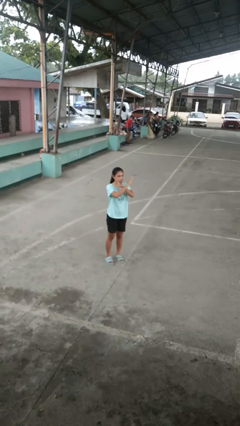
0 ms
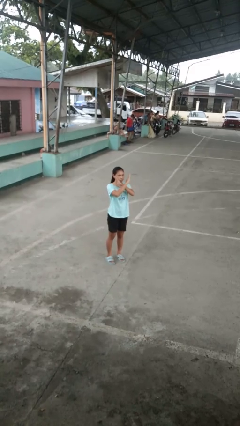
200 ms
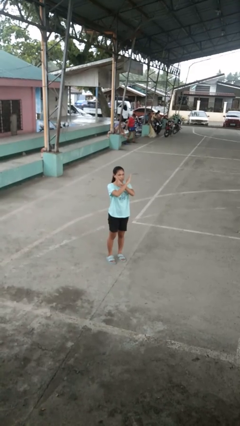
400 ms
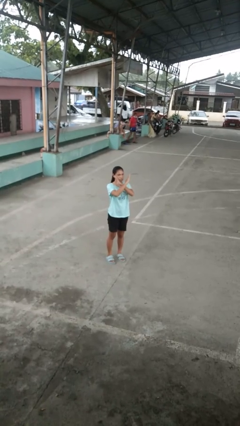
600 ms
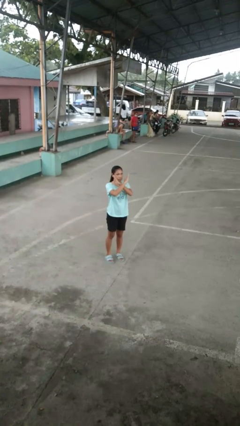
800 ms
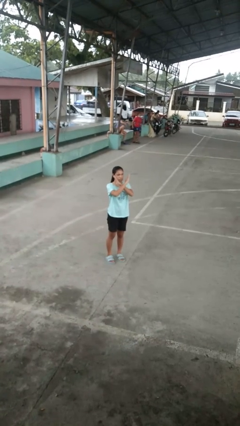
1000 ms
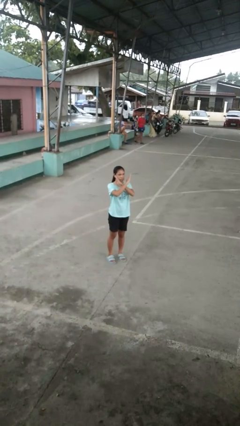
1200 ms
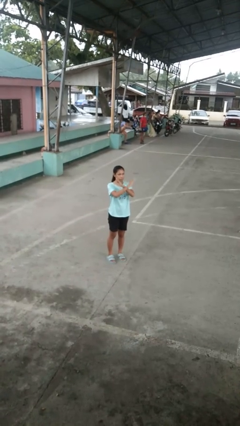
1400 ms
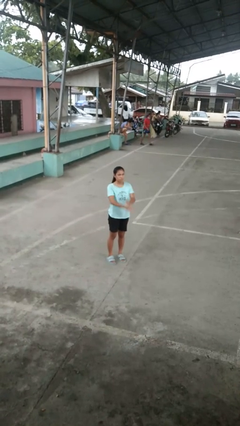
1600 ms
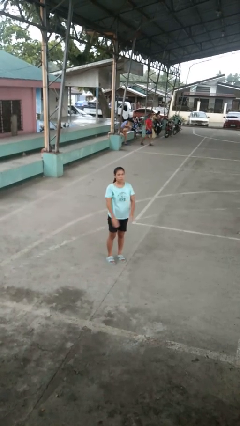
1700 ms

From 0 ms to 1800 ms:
person gestures arms x

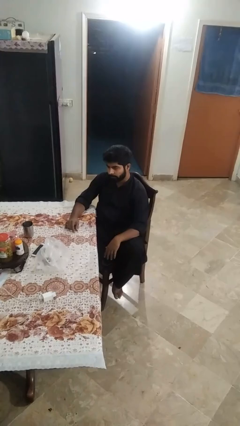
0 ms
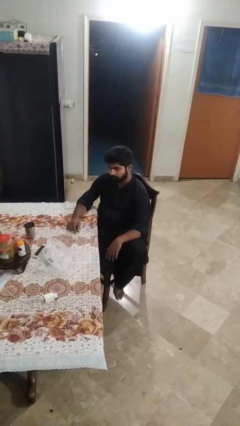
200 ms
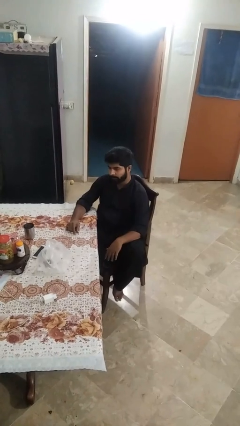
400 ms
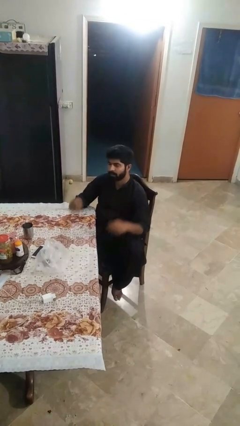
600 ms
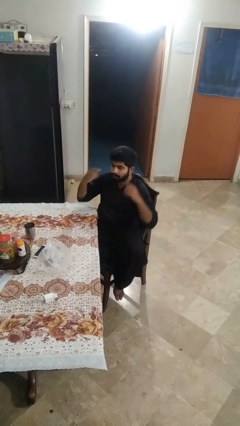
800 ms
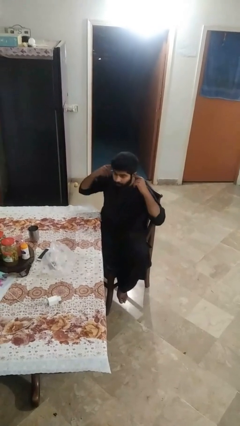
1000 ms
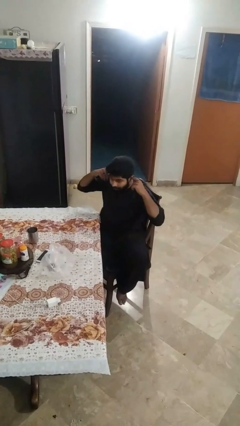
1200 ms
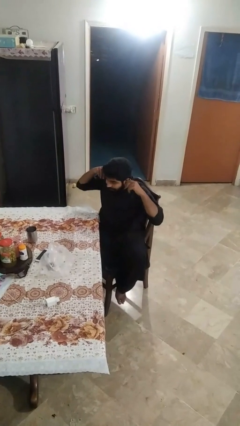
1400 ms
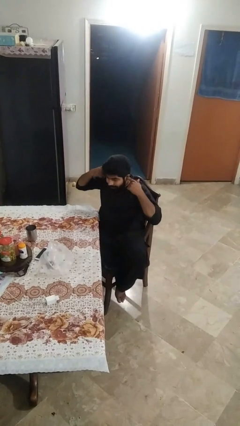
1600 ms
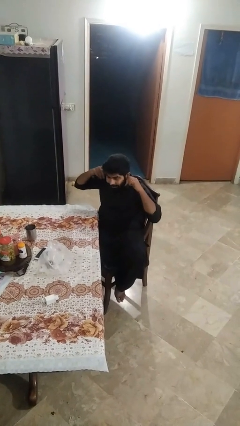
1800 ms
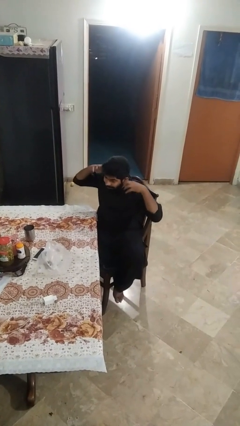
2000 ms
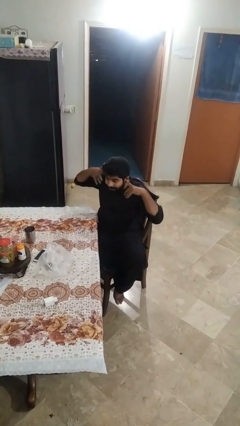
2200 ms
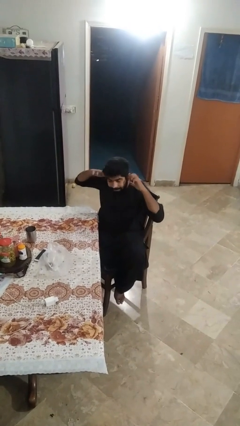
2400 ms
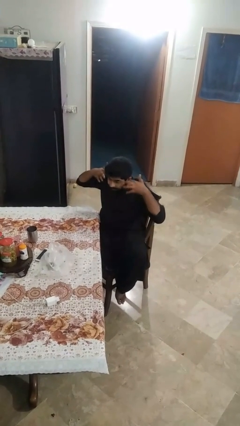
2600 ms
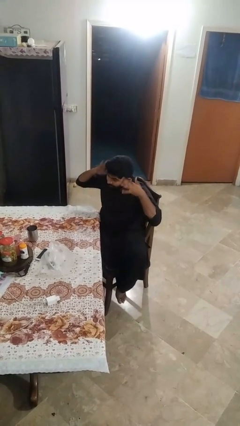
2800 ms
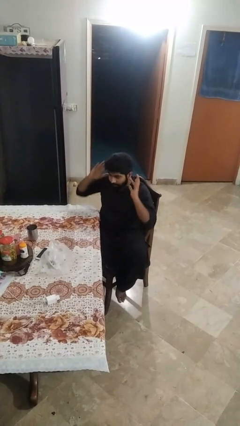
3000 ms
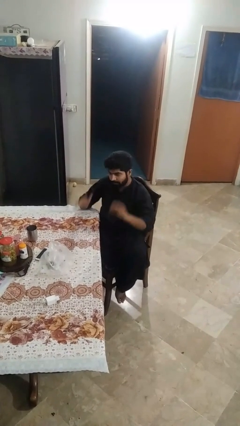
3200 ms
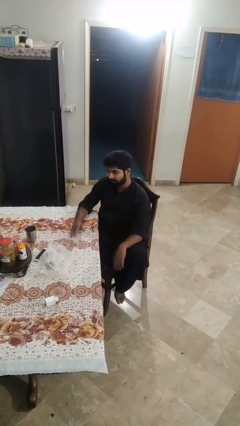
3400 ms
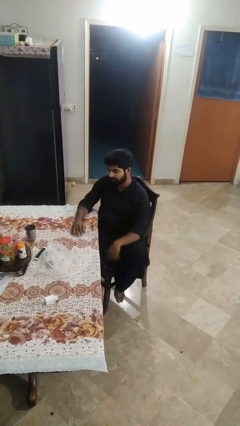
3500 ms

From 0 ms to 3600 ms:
person puts fingers in ear

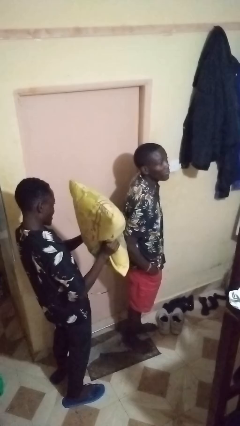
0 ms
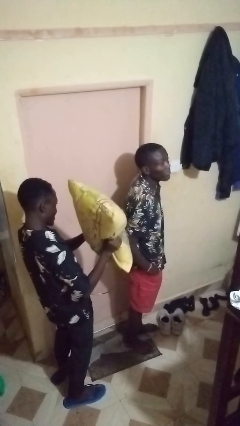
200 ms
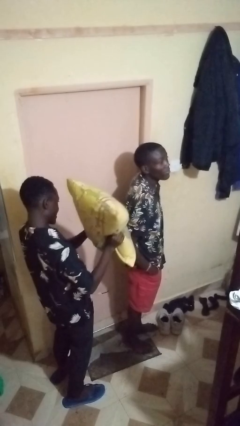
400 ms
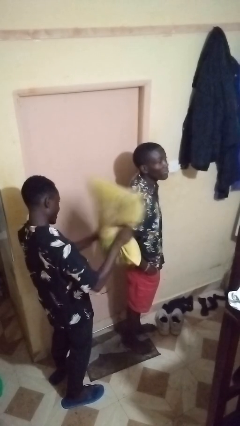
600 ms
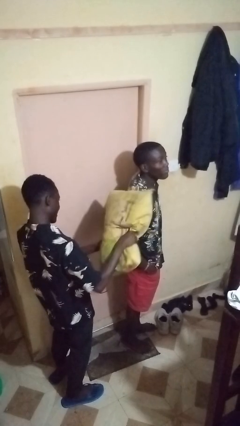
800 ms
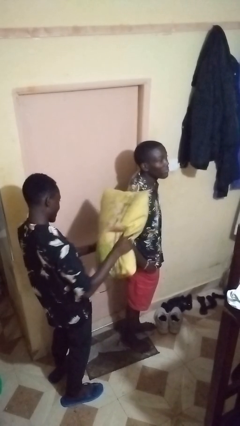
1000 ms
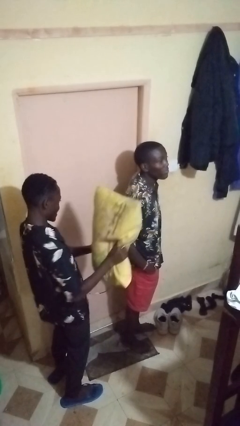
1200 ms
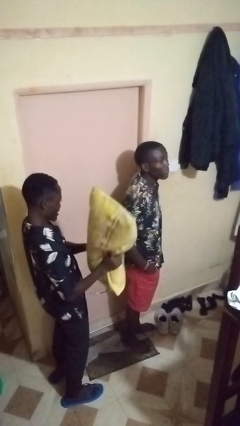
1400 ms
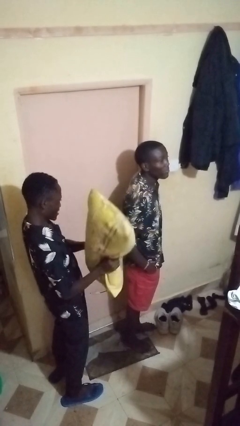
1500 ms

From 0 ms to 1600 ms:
person hits person with pillow

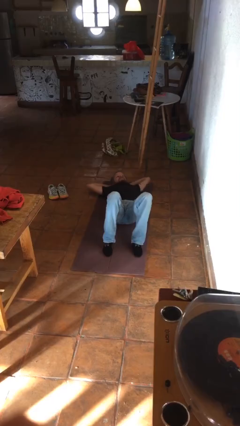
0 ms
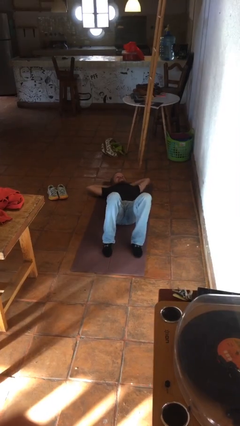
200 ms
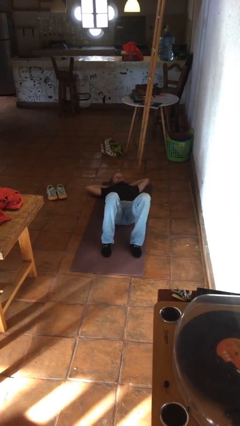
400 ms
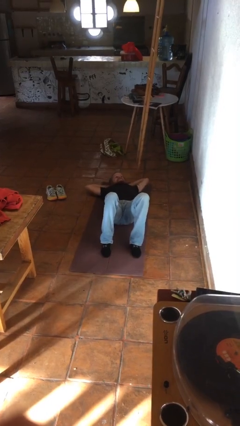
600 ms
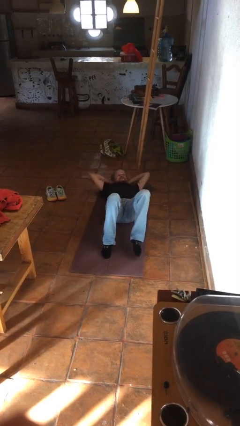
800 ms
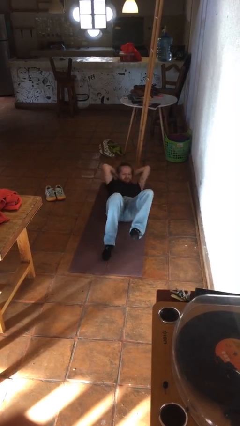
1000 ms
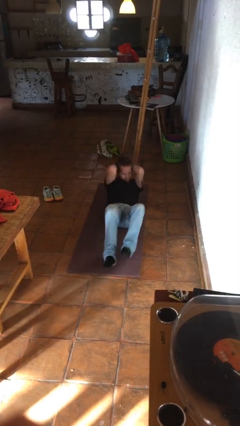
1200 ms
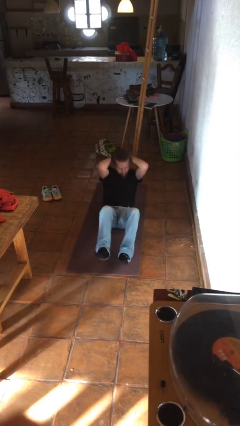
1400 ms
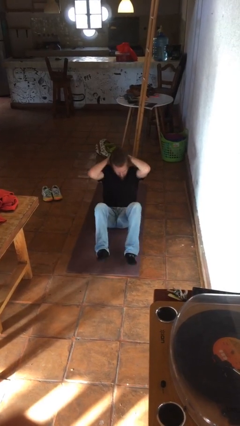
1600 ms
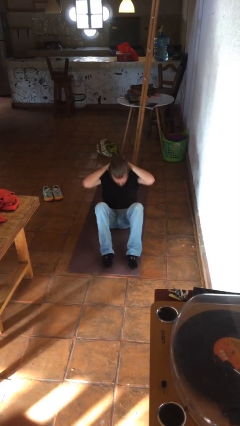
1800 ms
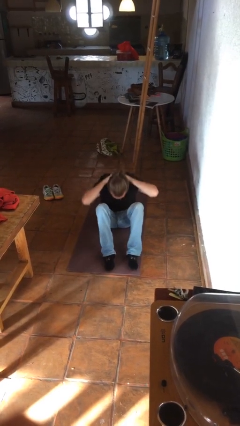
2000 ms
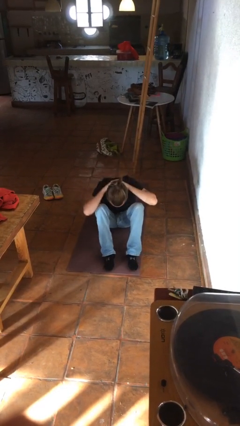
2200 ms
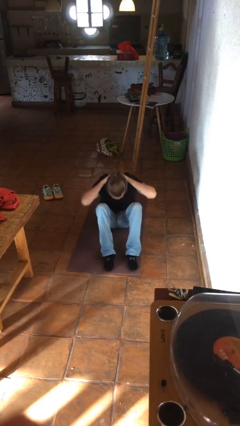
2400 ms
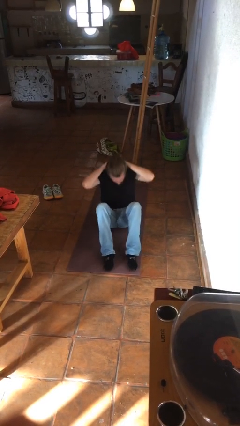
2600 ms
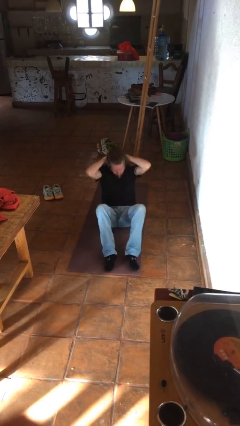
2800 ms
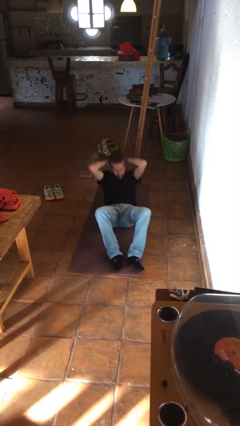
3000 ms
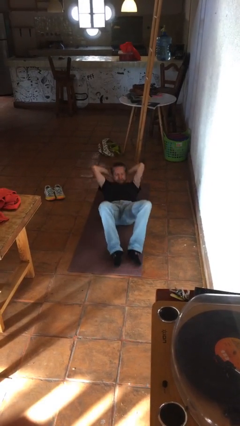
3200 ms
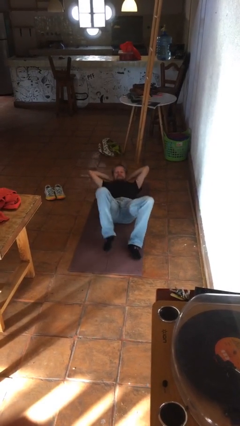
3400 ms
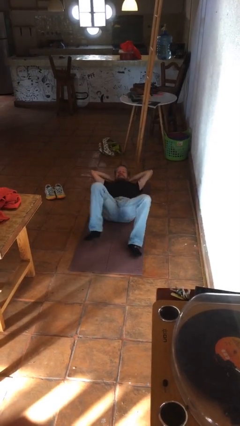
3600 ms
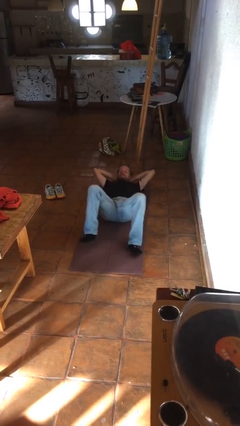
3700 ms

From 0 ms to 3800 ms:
person exercises with situp

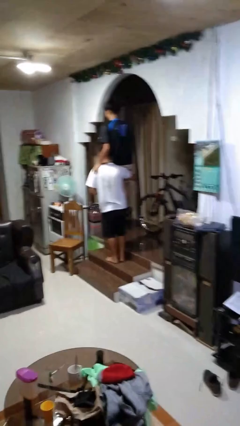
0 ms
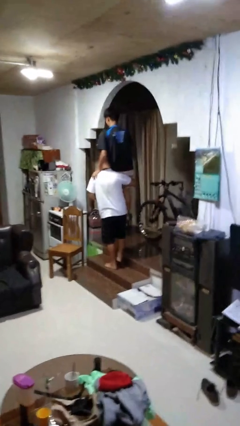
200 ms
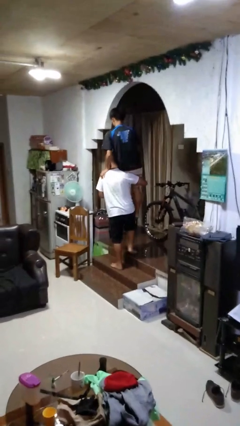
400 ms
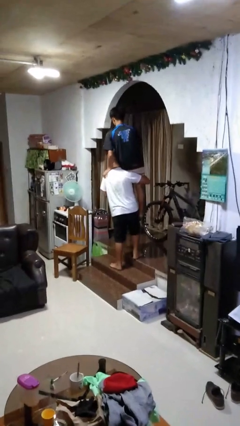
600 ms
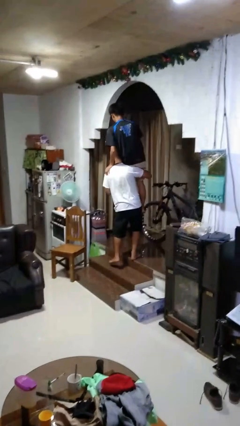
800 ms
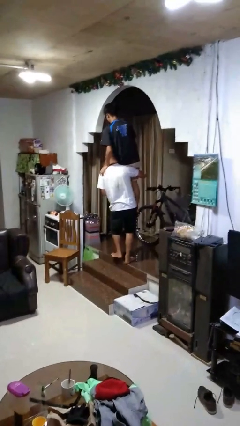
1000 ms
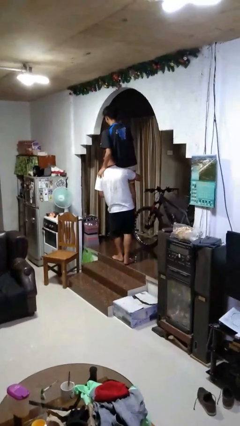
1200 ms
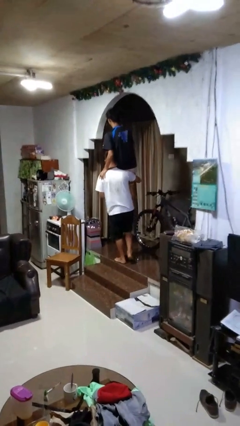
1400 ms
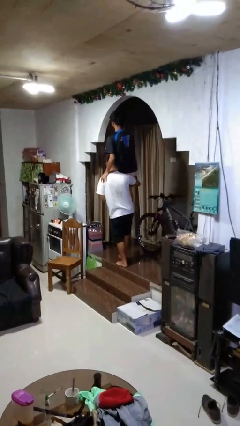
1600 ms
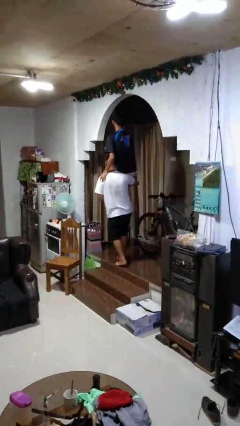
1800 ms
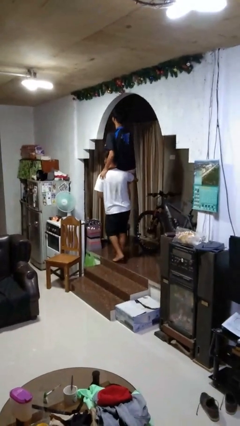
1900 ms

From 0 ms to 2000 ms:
person carries person on shoulders

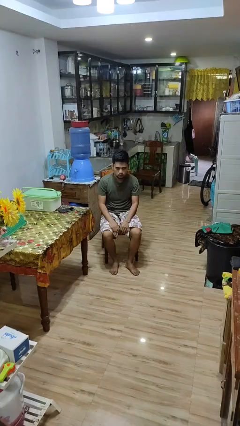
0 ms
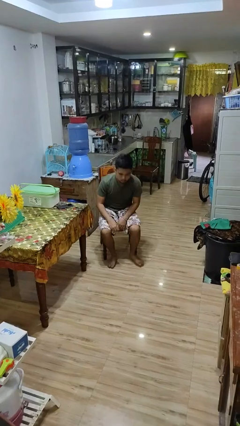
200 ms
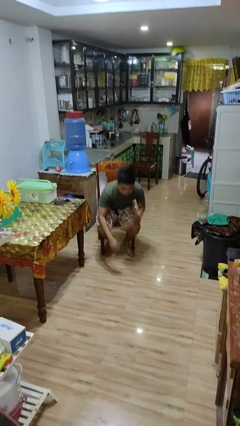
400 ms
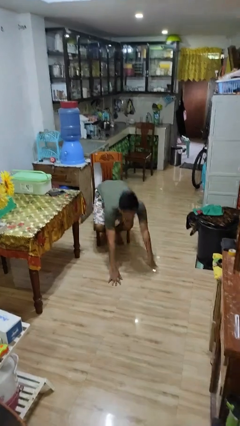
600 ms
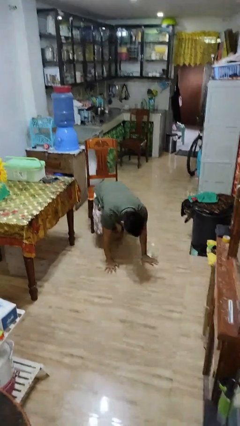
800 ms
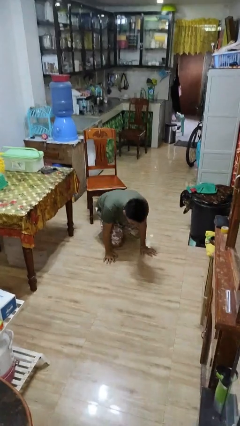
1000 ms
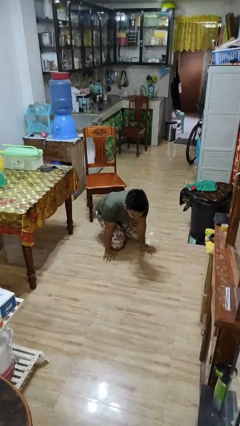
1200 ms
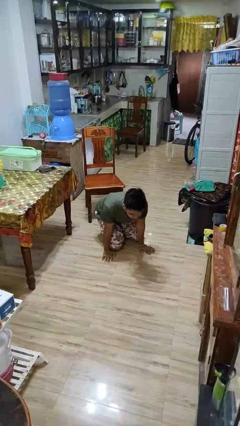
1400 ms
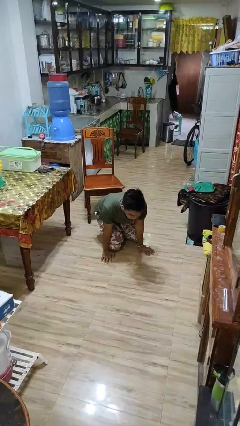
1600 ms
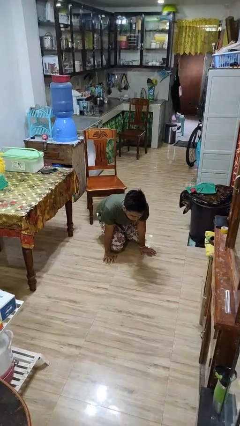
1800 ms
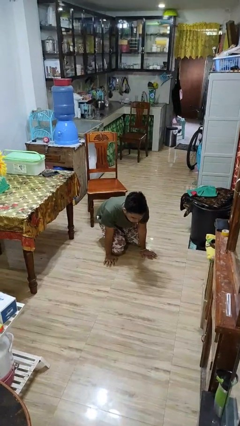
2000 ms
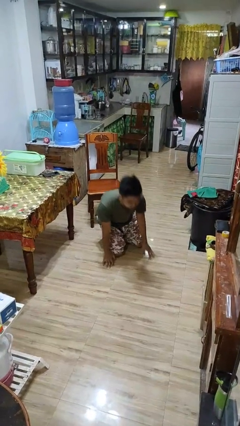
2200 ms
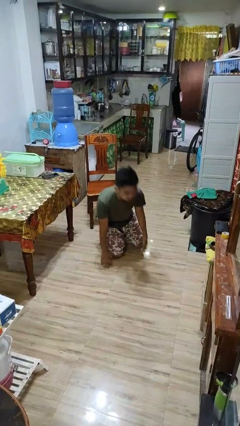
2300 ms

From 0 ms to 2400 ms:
person falls from chair

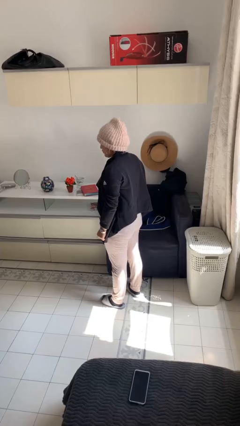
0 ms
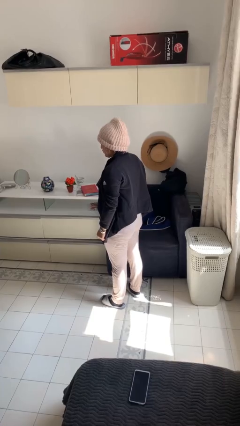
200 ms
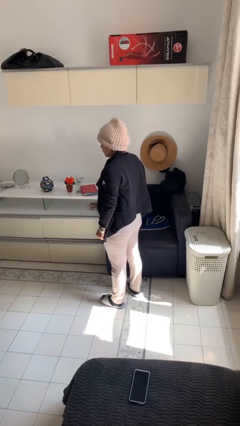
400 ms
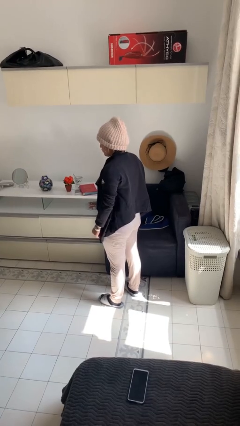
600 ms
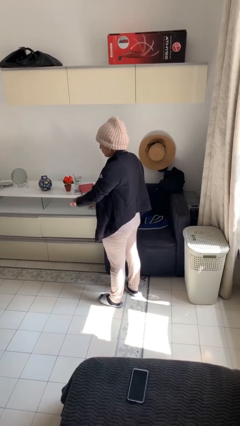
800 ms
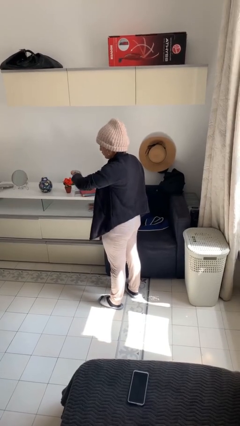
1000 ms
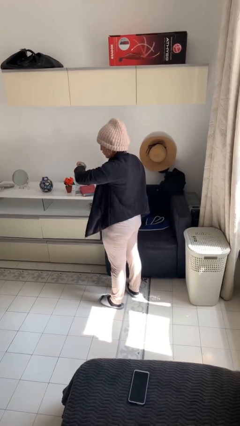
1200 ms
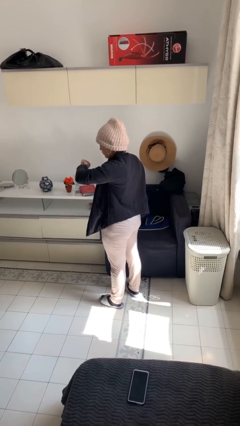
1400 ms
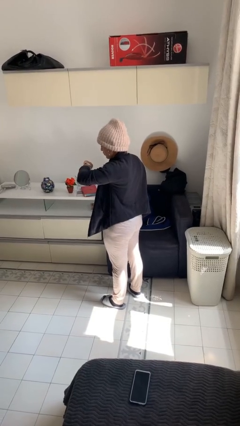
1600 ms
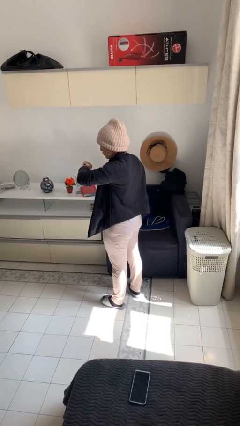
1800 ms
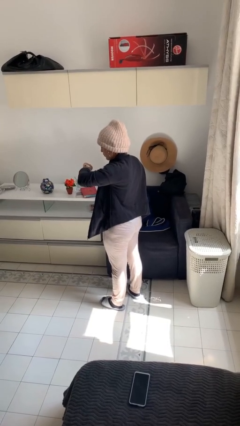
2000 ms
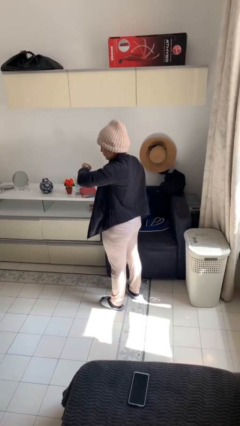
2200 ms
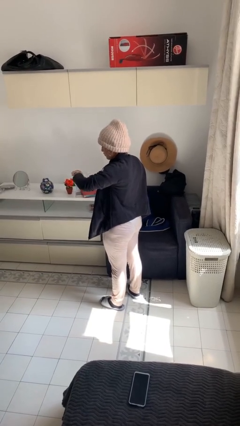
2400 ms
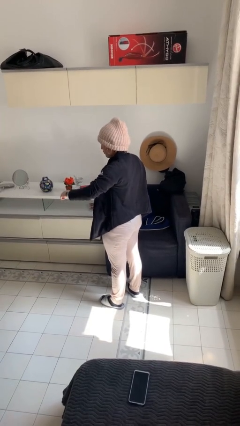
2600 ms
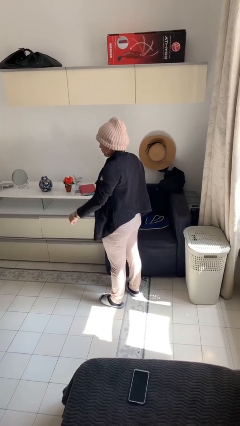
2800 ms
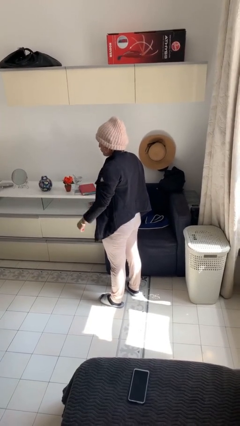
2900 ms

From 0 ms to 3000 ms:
person looks at wristwatch
